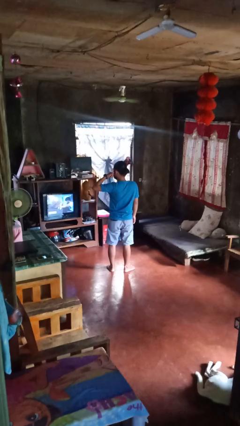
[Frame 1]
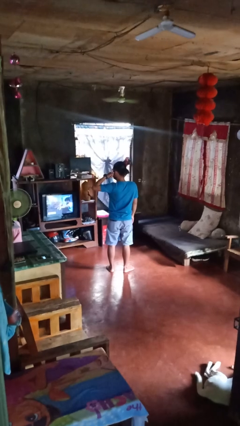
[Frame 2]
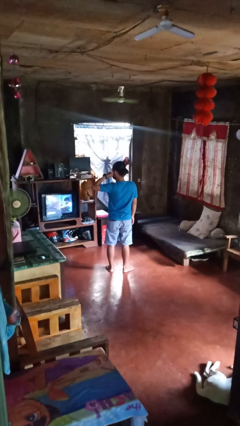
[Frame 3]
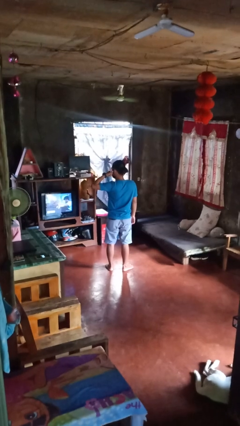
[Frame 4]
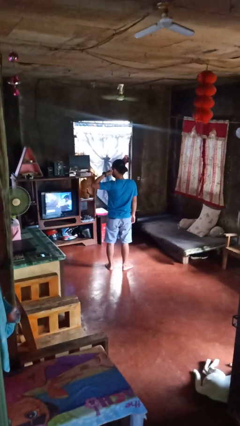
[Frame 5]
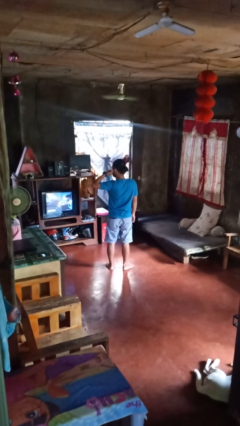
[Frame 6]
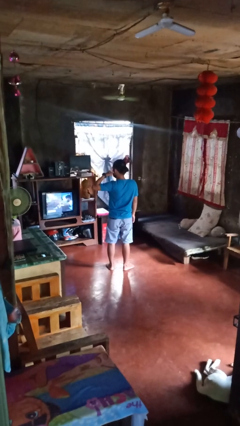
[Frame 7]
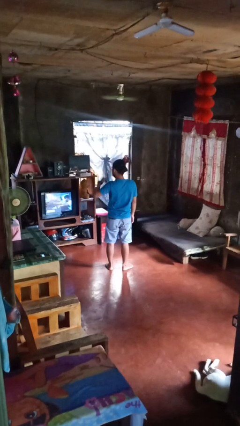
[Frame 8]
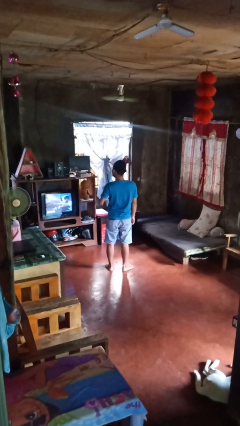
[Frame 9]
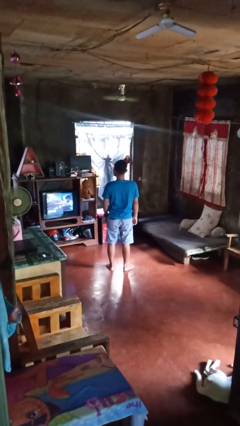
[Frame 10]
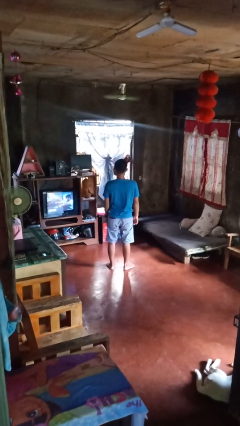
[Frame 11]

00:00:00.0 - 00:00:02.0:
person gestures call me

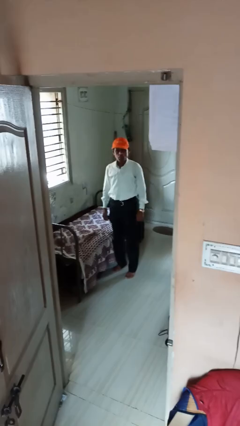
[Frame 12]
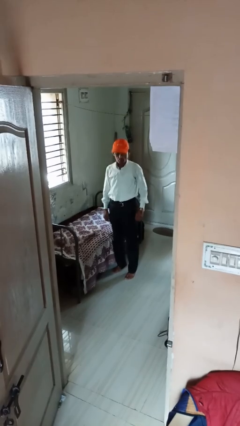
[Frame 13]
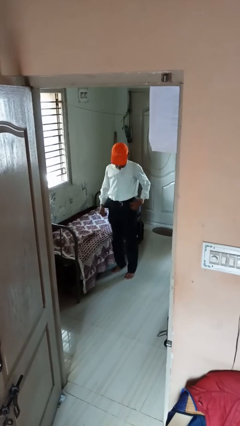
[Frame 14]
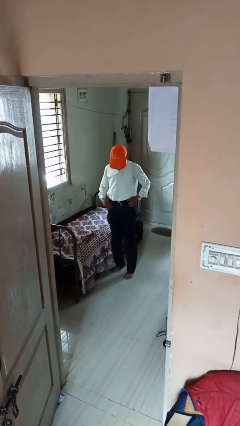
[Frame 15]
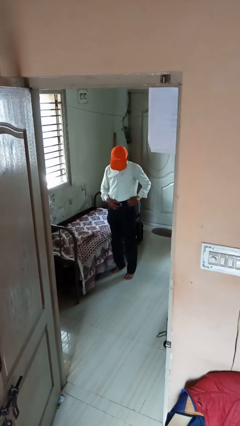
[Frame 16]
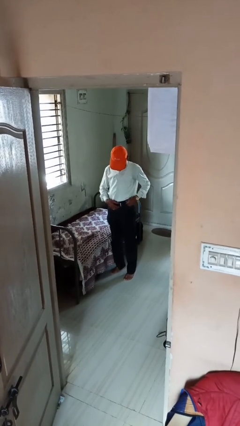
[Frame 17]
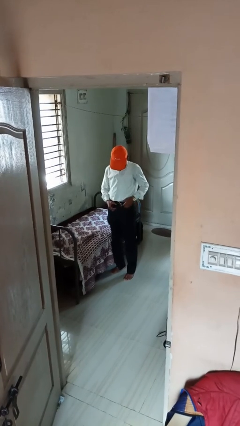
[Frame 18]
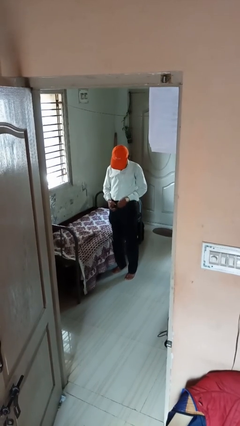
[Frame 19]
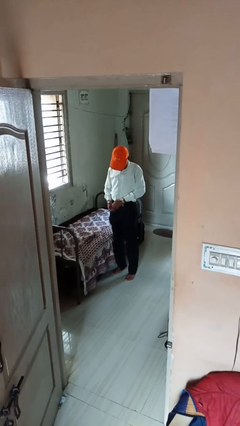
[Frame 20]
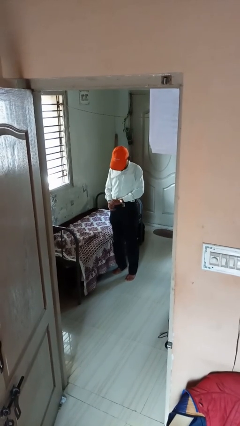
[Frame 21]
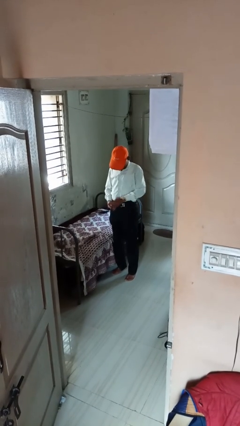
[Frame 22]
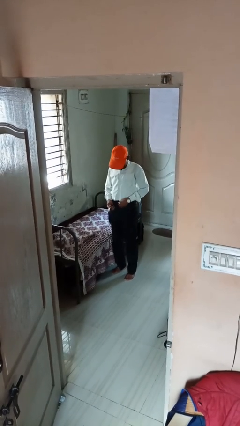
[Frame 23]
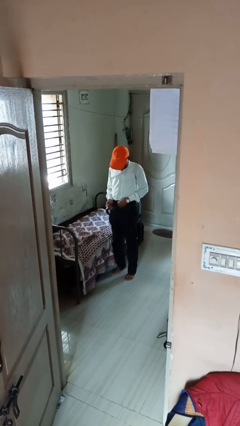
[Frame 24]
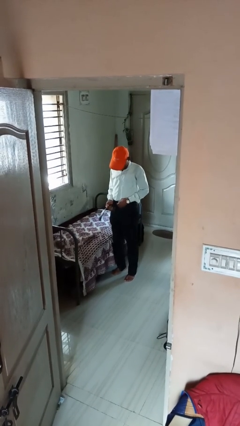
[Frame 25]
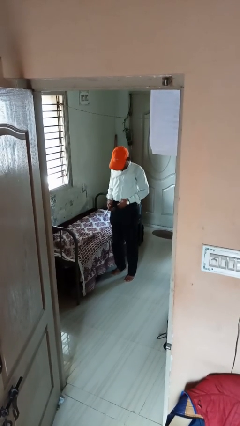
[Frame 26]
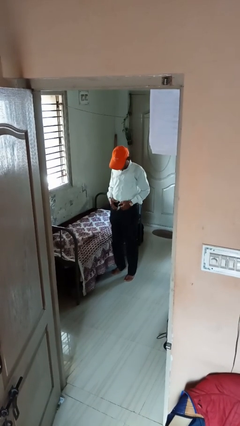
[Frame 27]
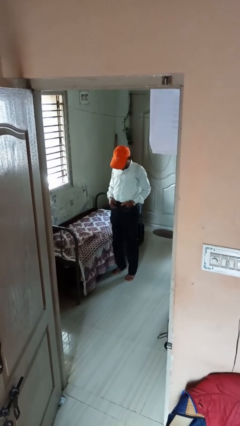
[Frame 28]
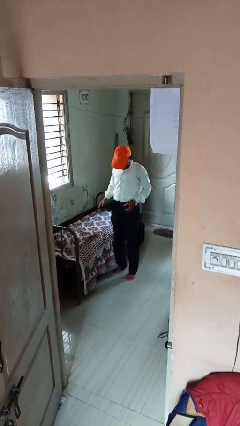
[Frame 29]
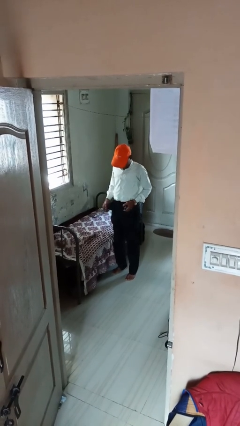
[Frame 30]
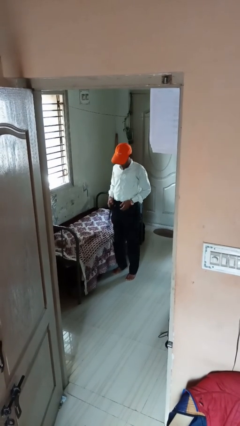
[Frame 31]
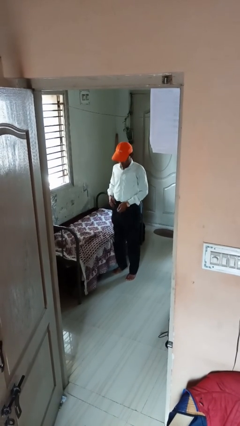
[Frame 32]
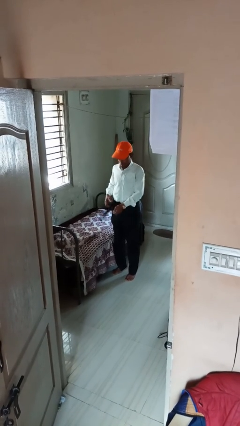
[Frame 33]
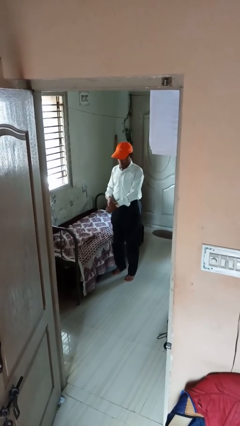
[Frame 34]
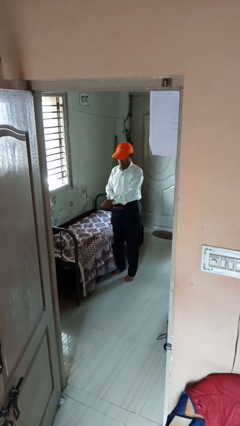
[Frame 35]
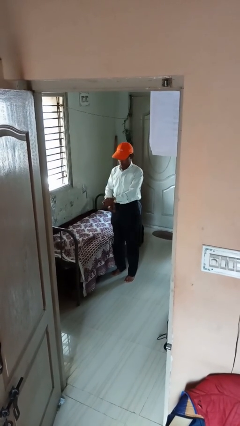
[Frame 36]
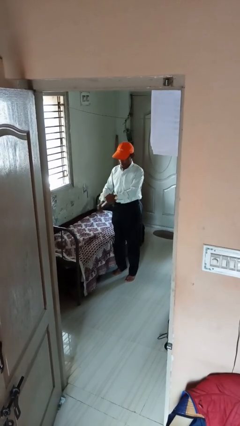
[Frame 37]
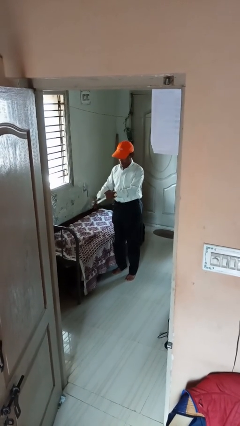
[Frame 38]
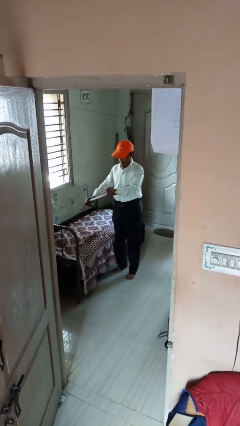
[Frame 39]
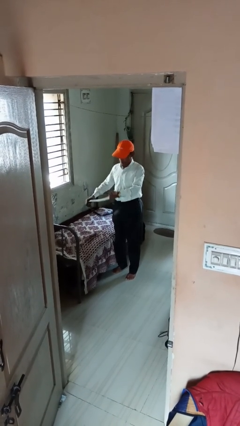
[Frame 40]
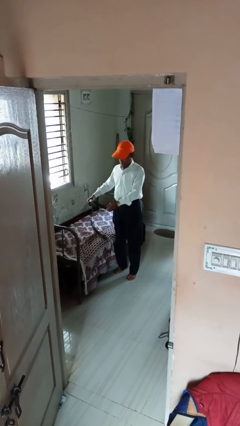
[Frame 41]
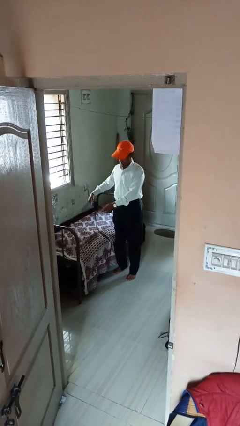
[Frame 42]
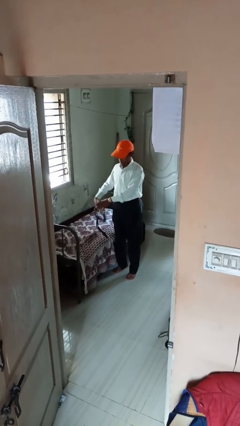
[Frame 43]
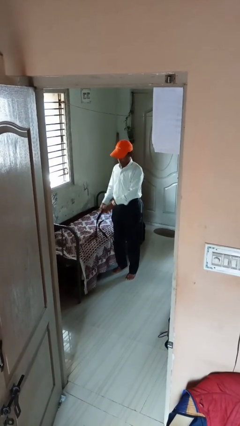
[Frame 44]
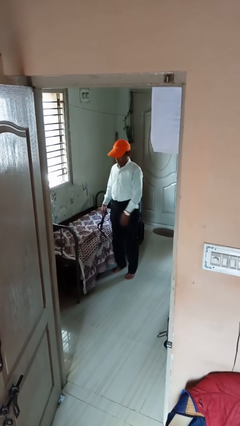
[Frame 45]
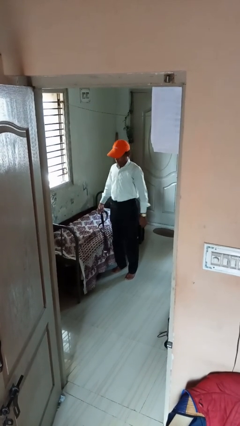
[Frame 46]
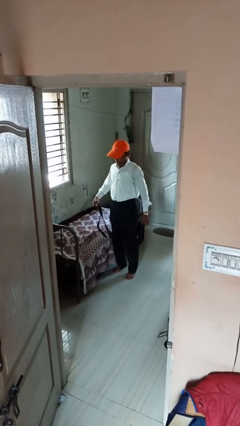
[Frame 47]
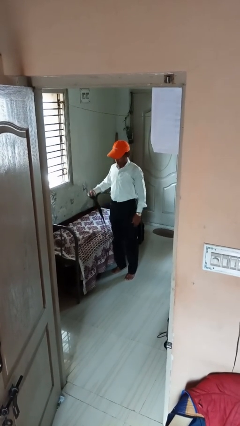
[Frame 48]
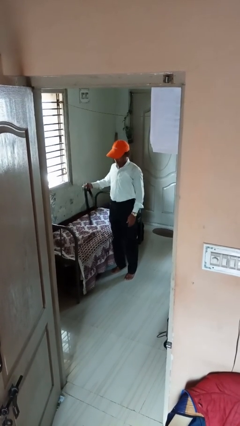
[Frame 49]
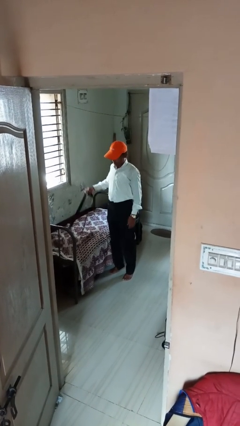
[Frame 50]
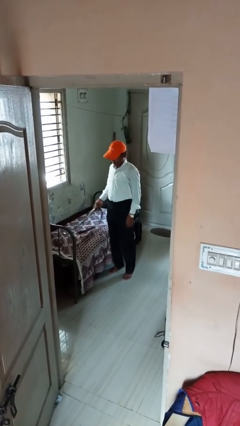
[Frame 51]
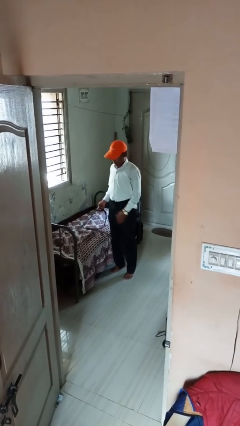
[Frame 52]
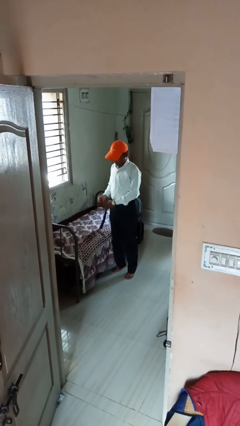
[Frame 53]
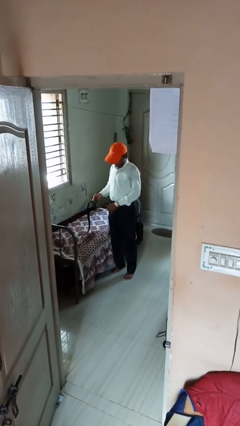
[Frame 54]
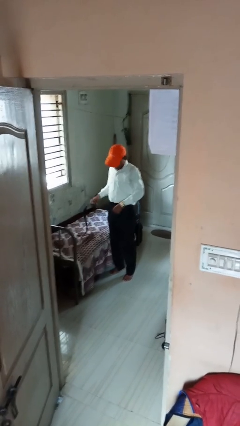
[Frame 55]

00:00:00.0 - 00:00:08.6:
person takes off belt

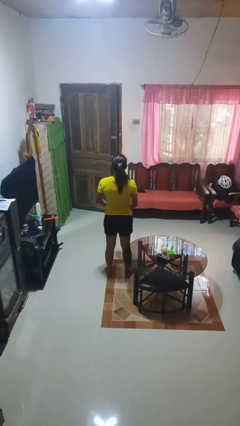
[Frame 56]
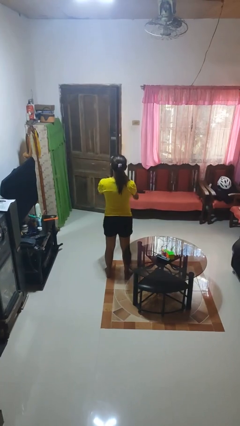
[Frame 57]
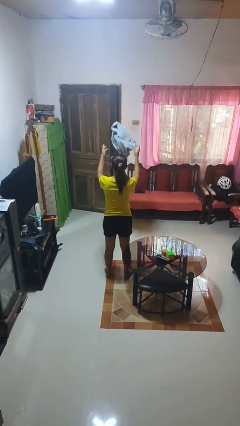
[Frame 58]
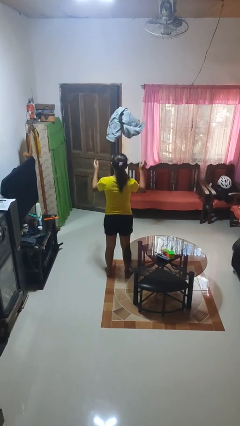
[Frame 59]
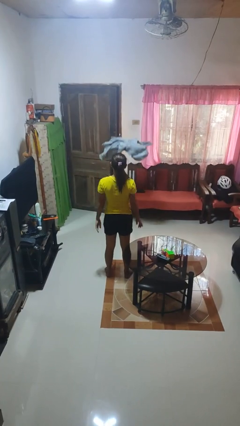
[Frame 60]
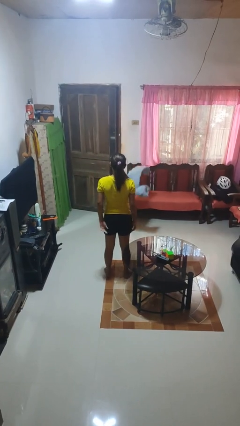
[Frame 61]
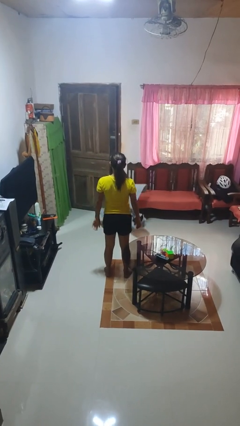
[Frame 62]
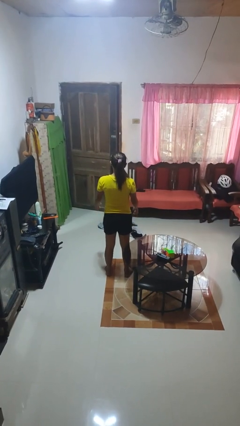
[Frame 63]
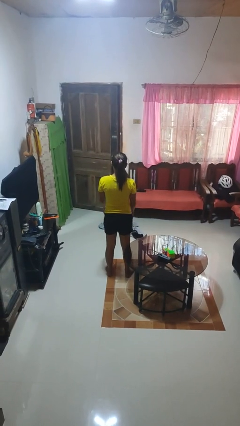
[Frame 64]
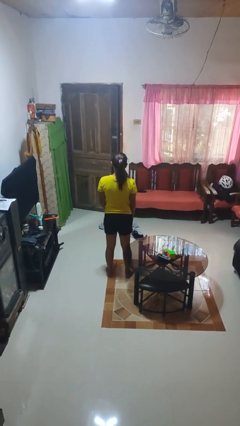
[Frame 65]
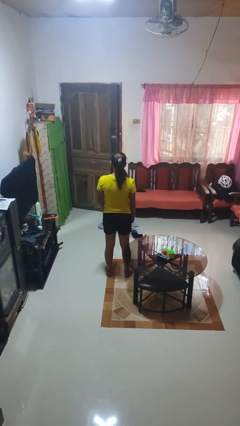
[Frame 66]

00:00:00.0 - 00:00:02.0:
person throws object into air

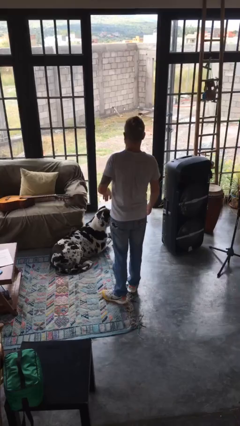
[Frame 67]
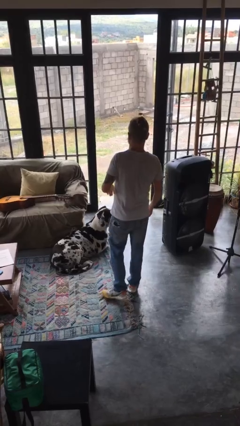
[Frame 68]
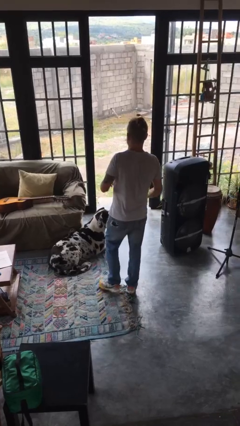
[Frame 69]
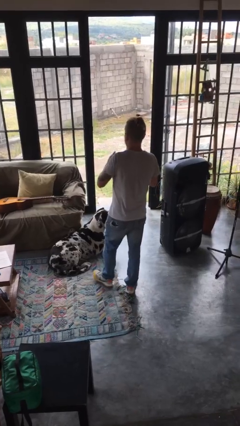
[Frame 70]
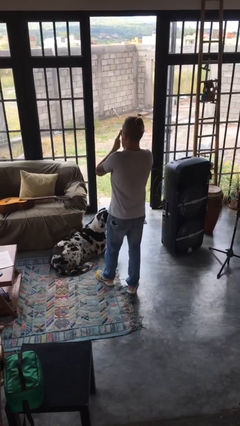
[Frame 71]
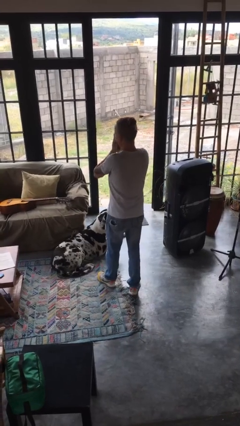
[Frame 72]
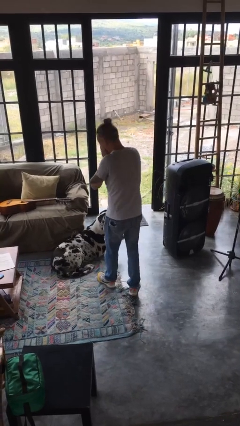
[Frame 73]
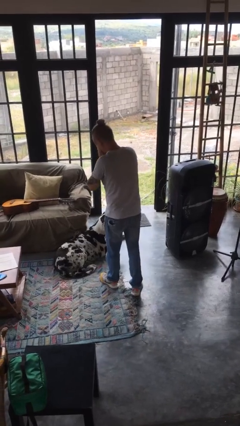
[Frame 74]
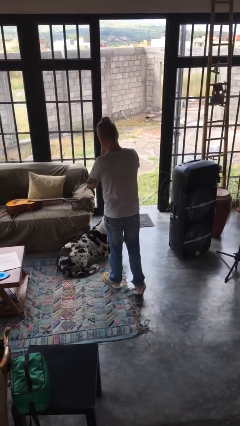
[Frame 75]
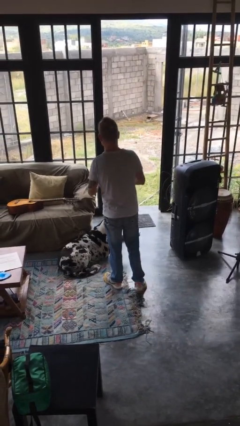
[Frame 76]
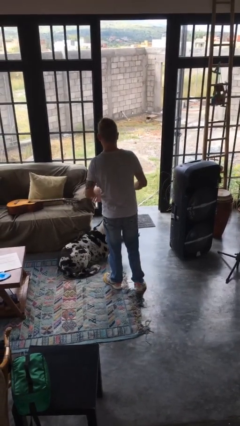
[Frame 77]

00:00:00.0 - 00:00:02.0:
person sneezes into hand

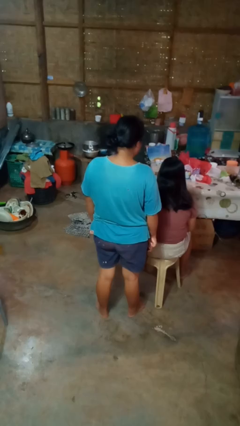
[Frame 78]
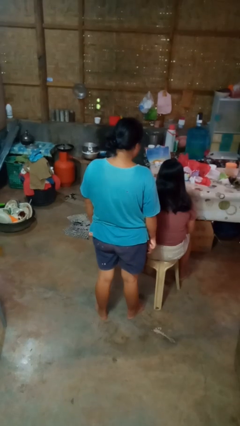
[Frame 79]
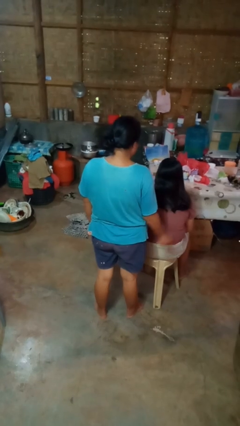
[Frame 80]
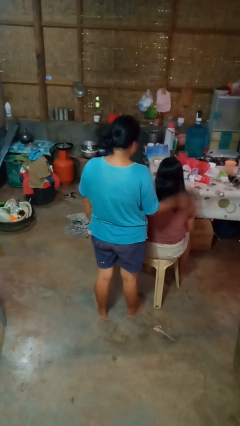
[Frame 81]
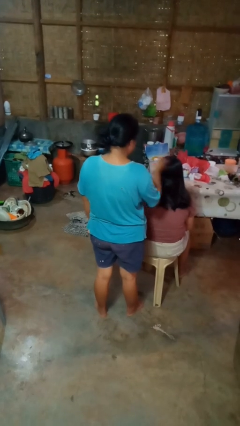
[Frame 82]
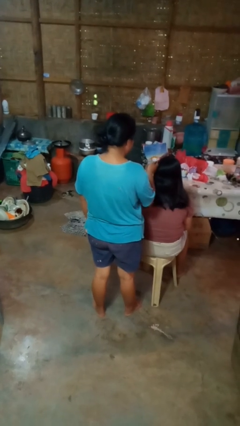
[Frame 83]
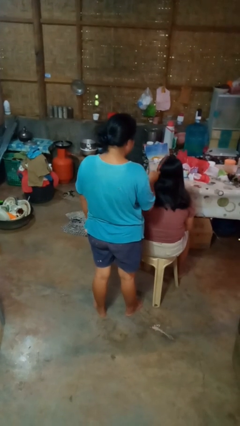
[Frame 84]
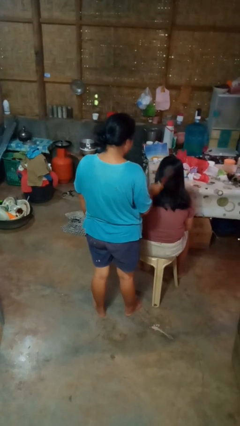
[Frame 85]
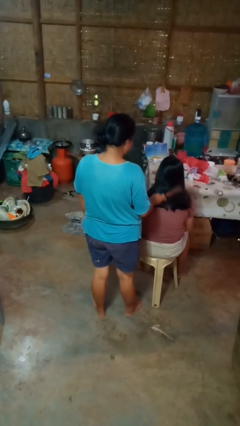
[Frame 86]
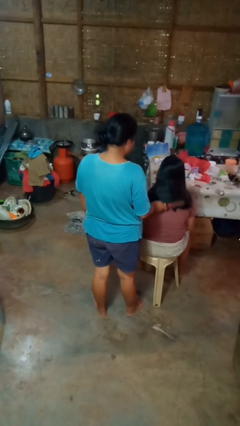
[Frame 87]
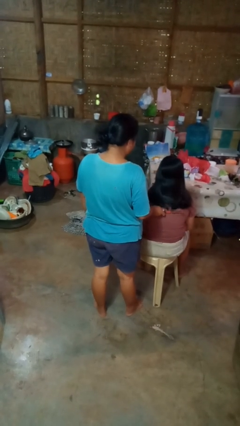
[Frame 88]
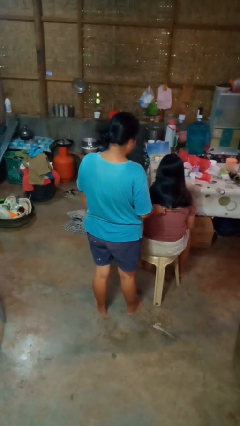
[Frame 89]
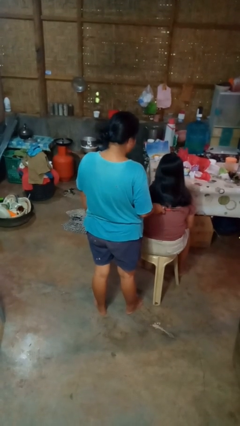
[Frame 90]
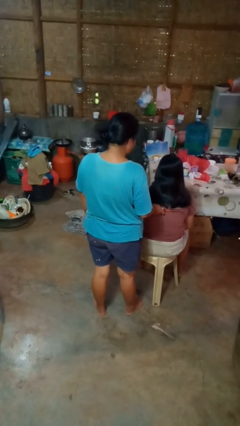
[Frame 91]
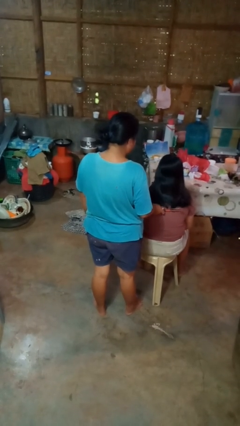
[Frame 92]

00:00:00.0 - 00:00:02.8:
person brushes hair of person
